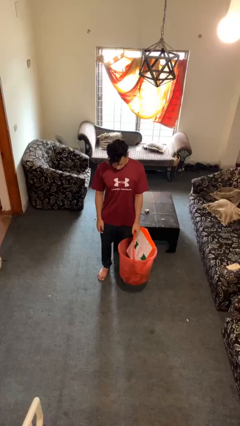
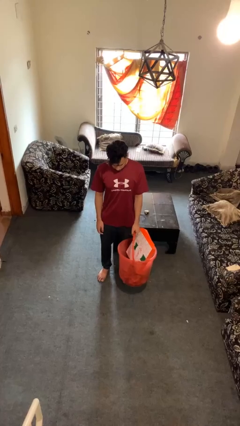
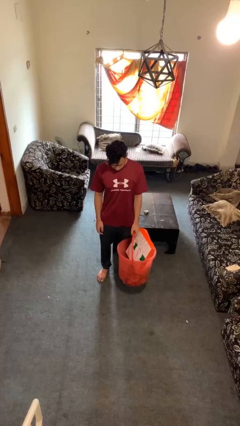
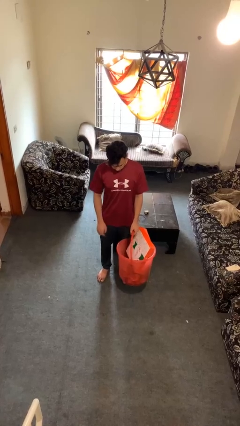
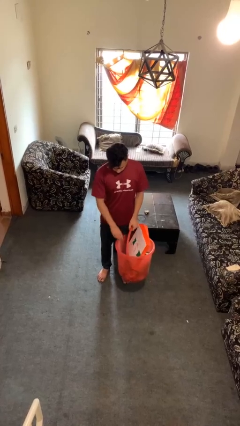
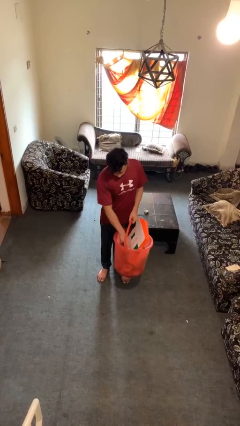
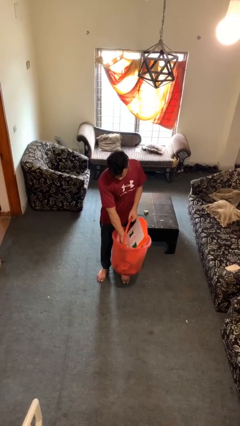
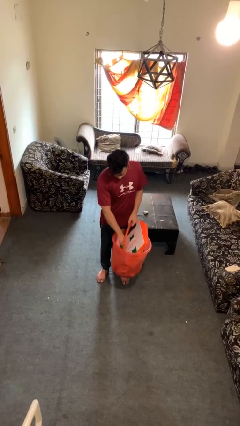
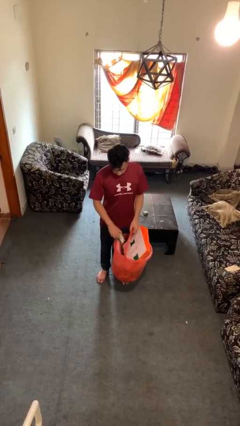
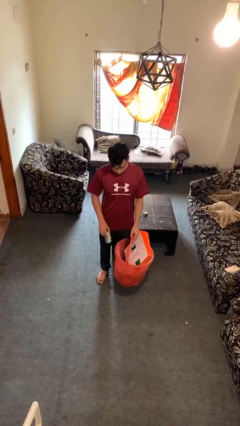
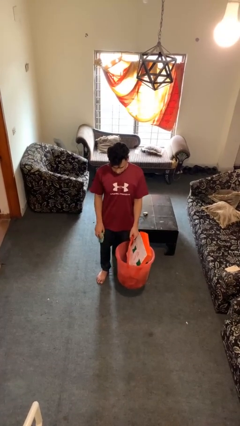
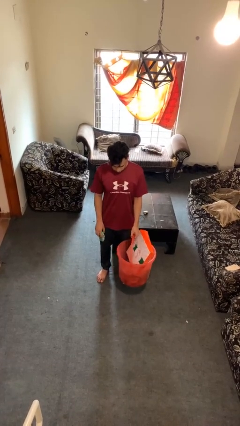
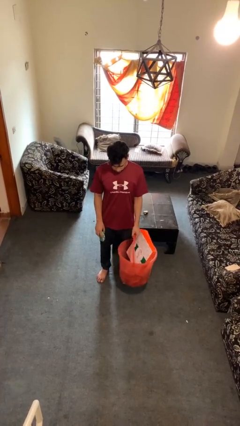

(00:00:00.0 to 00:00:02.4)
person takes object from basket

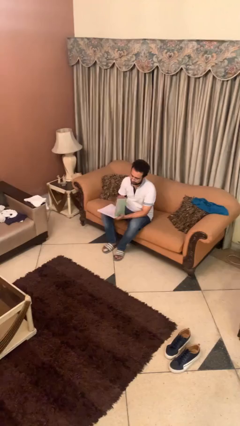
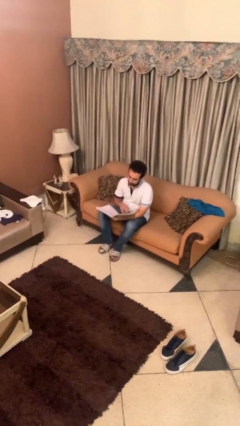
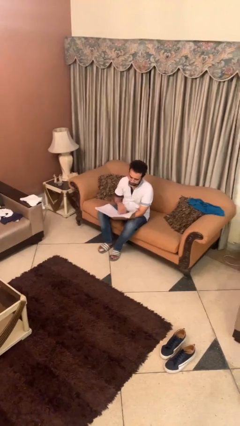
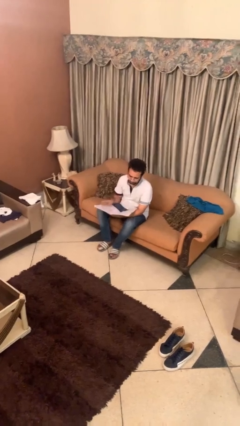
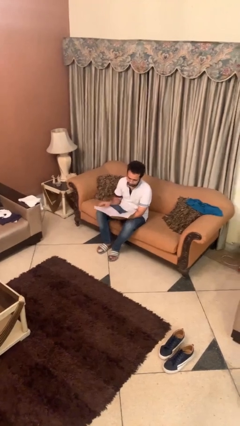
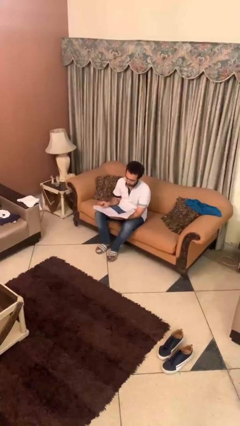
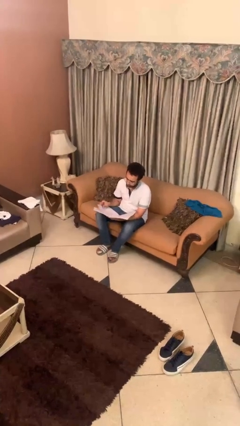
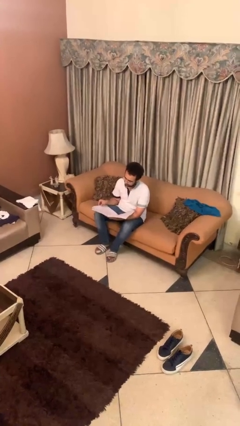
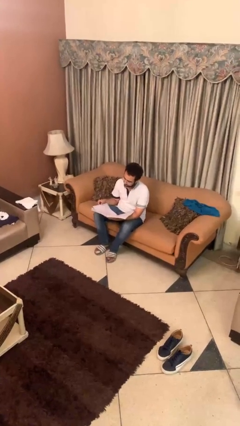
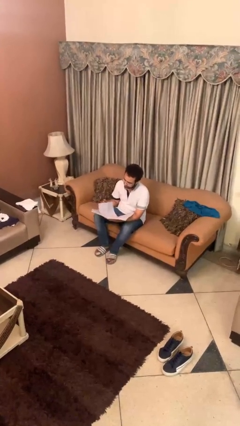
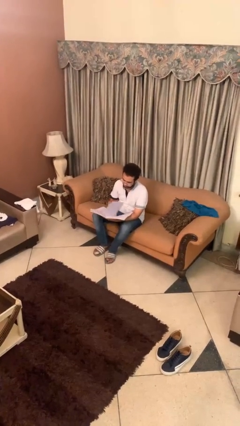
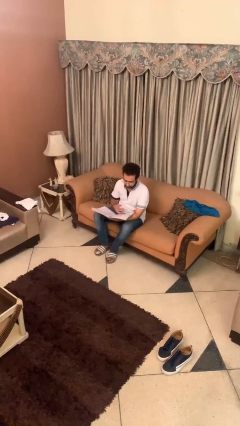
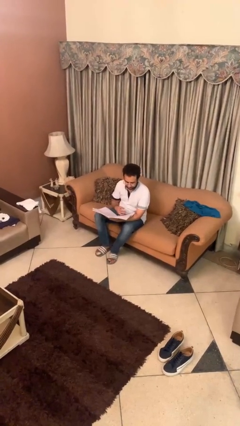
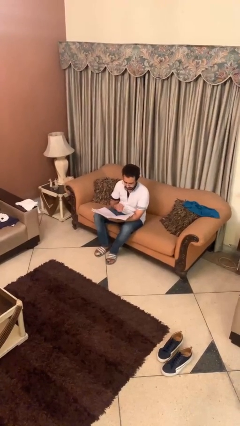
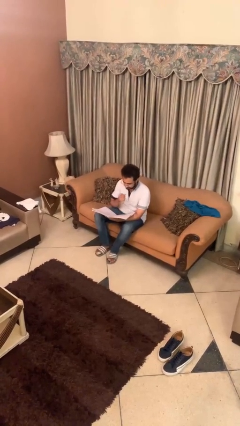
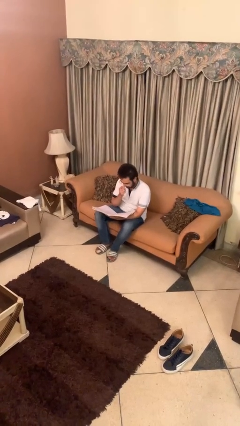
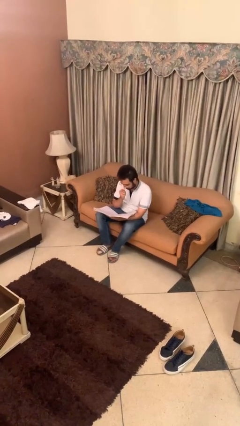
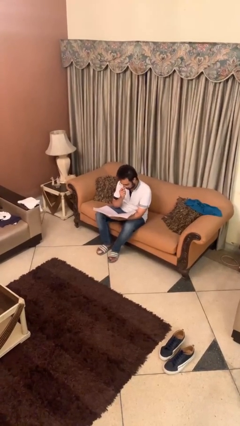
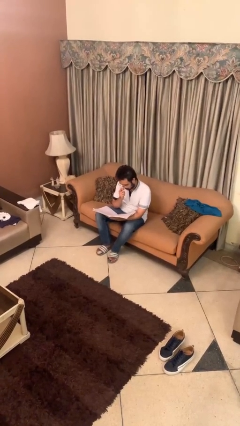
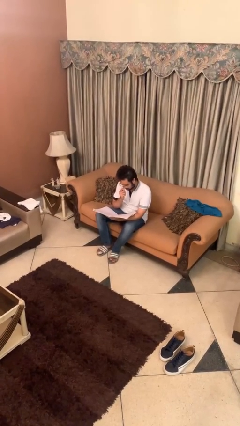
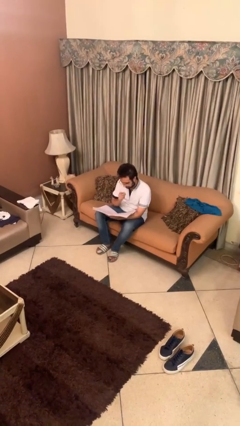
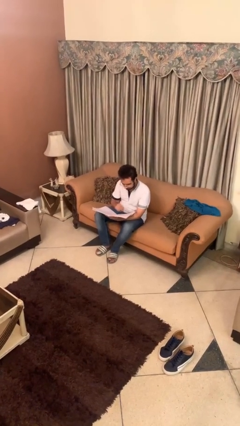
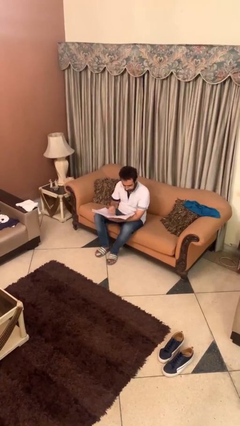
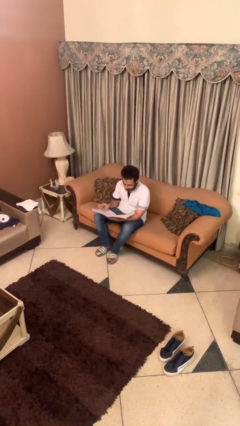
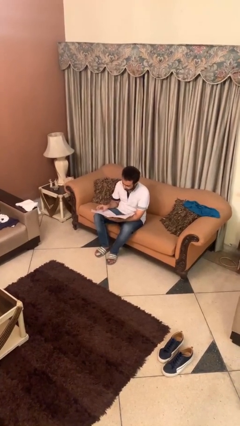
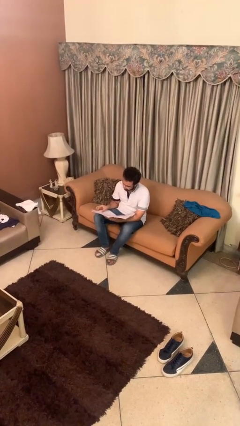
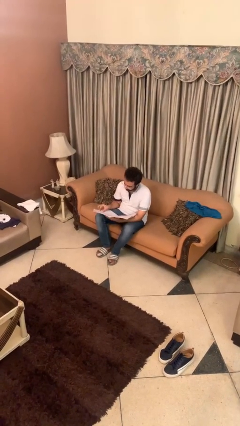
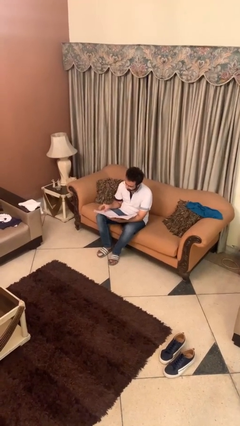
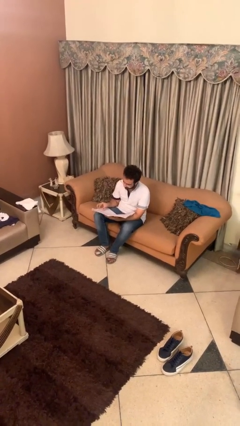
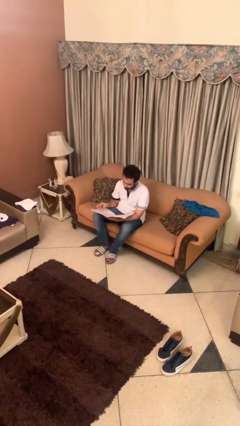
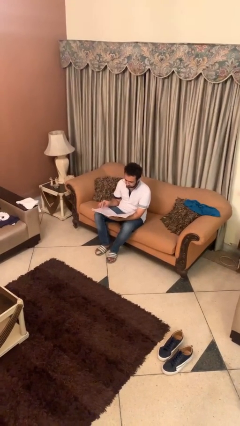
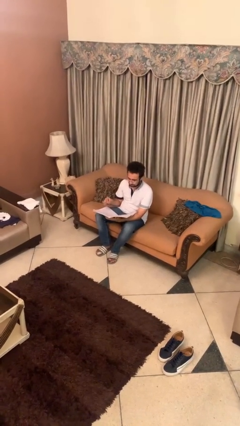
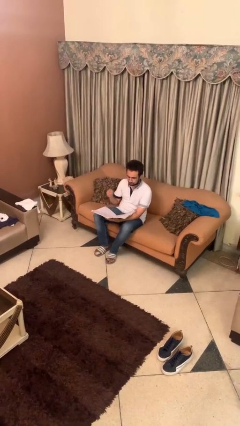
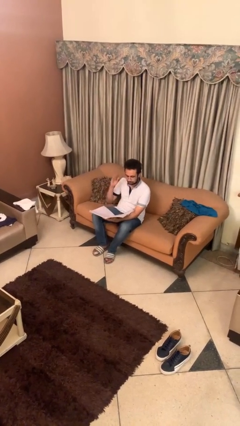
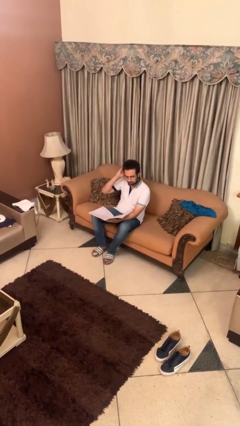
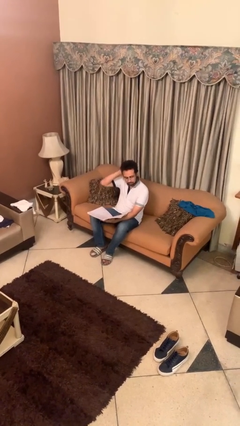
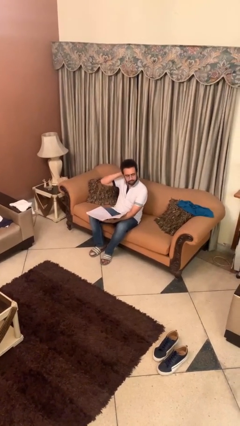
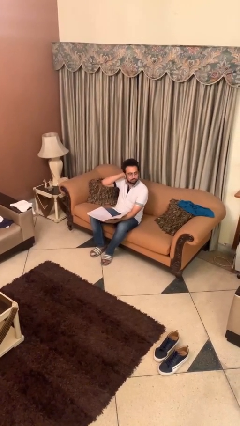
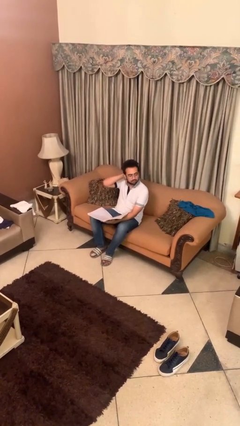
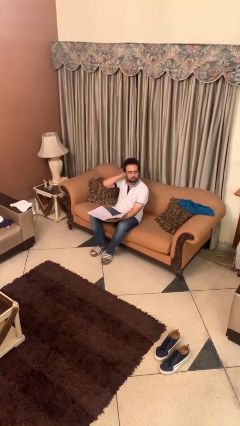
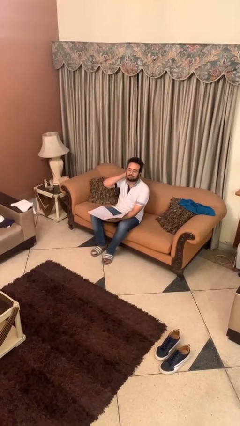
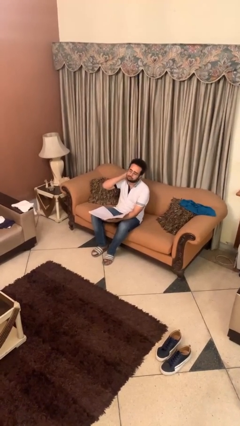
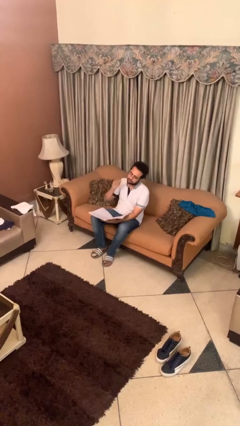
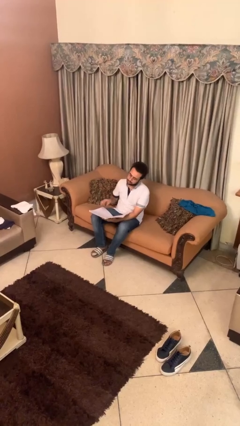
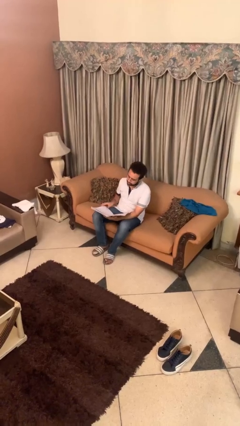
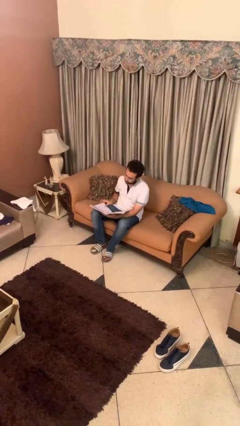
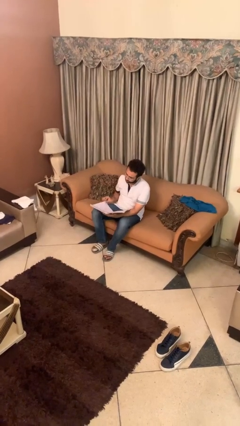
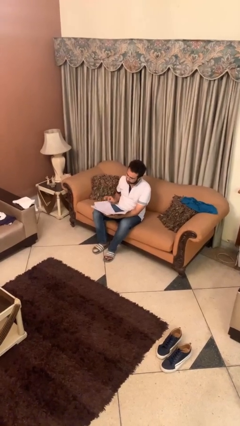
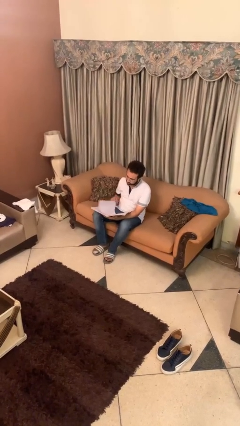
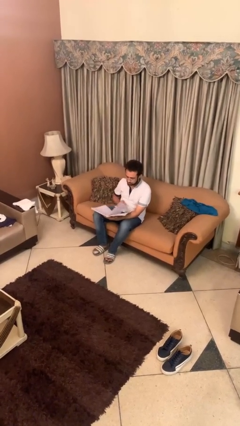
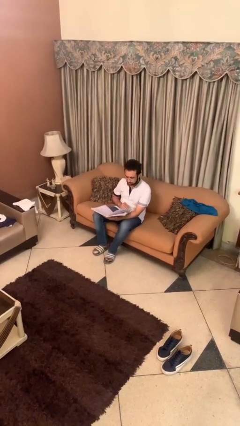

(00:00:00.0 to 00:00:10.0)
person reads document

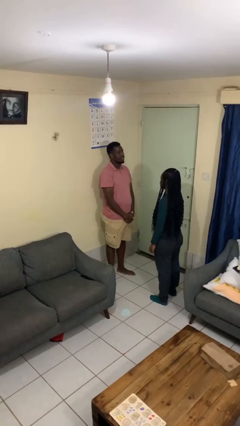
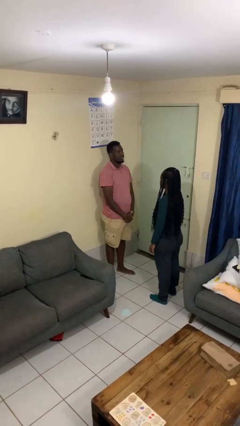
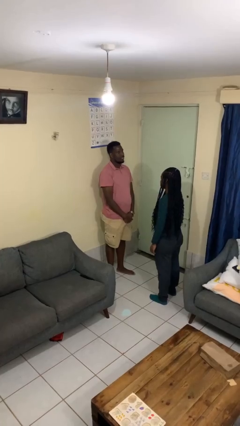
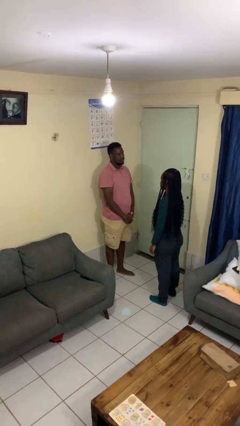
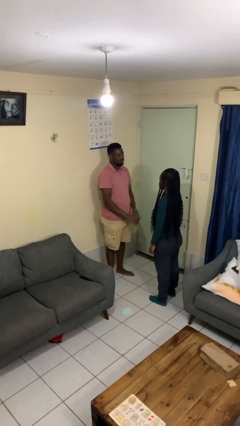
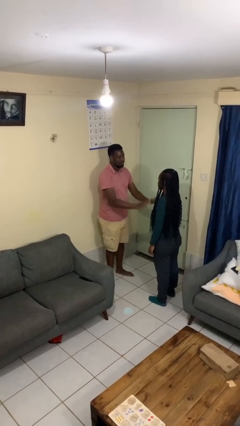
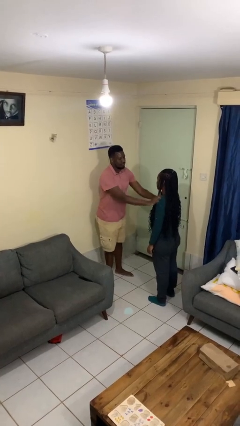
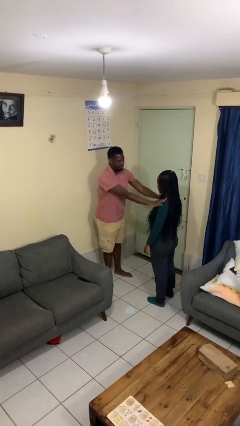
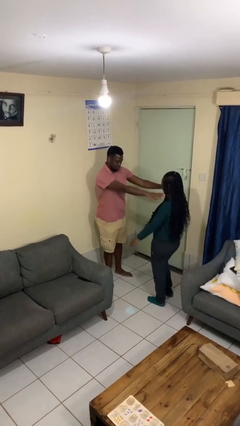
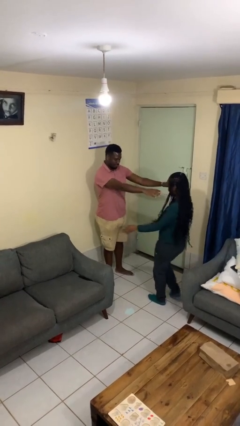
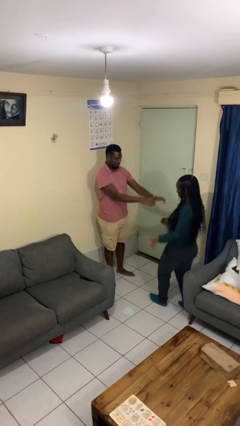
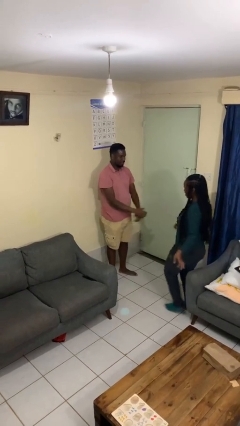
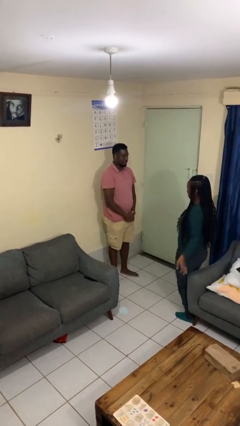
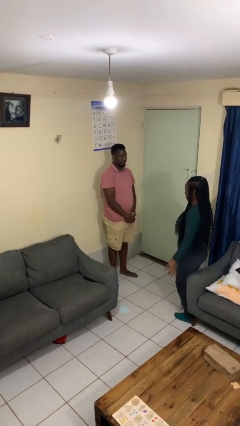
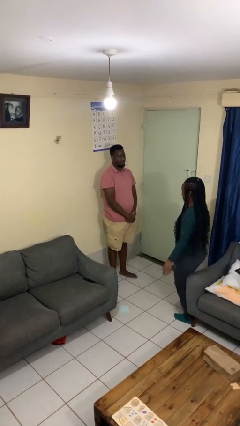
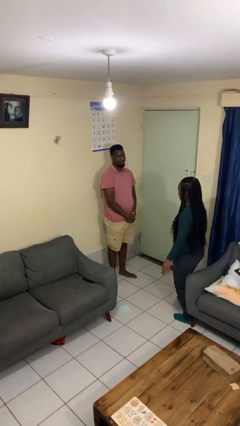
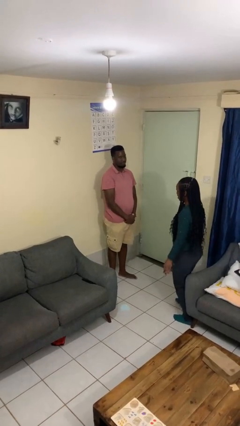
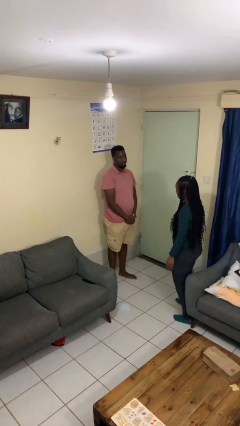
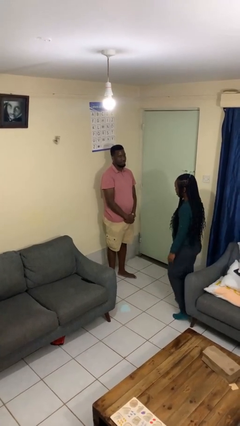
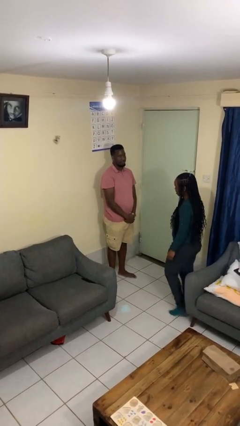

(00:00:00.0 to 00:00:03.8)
person shoves person

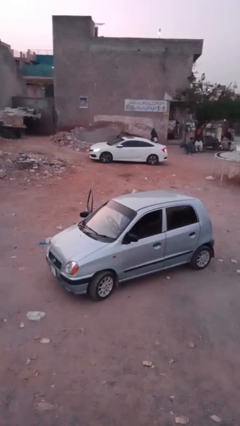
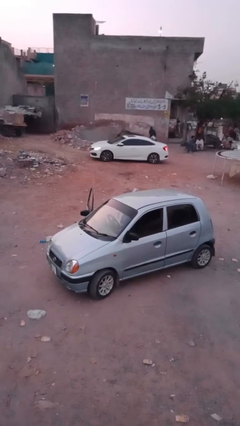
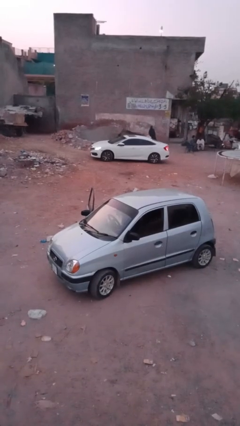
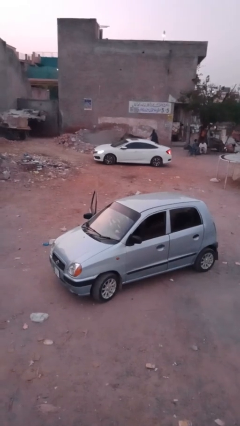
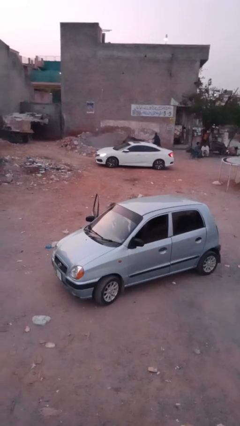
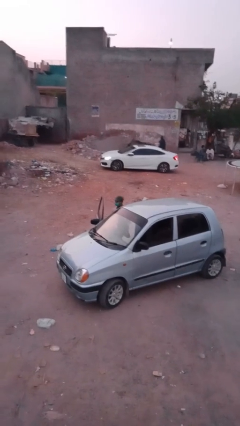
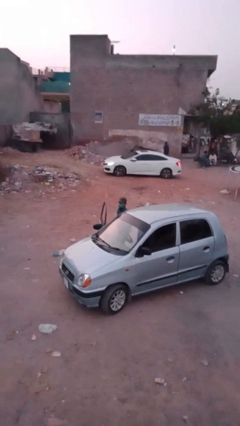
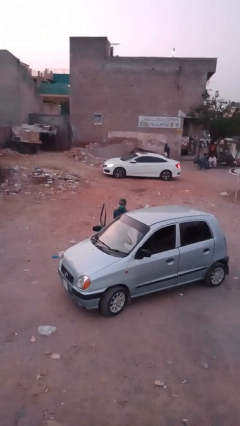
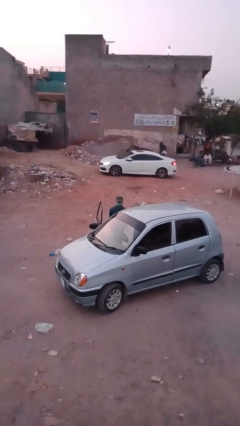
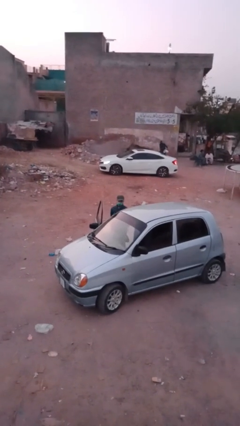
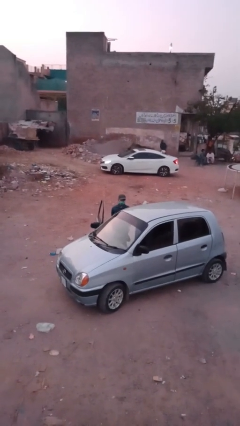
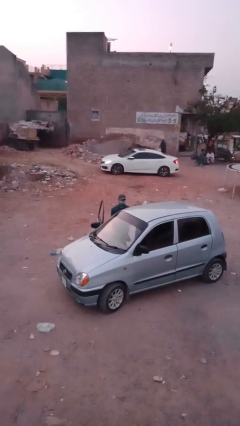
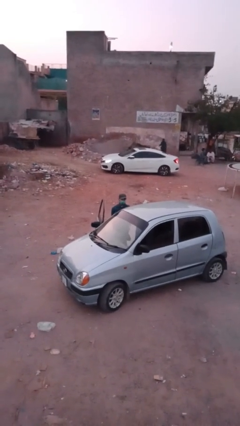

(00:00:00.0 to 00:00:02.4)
person exits car
